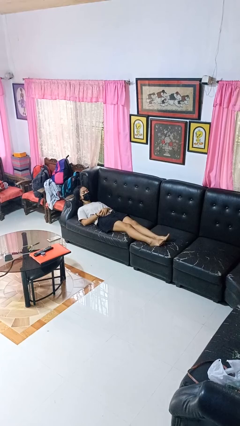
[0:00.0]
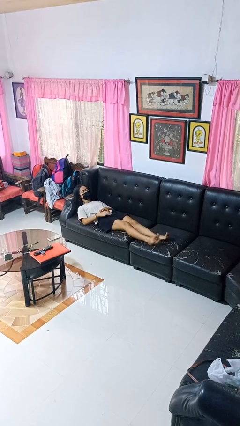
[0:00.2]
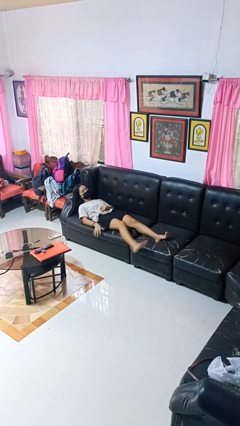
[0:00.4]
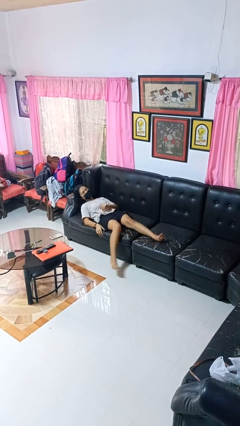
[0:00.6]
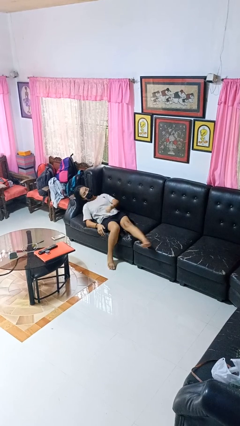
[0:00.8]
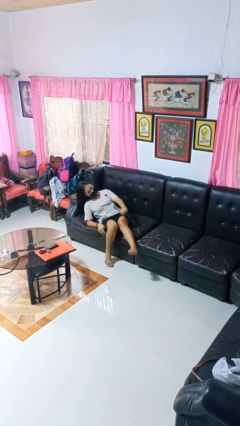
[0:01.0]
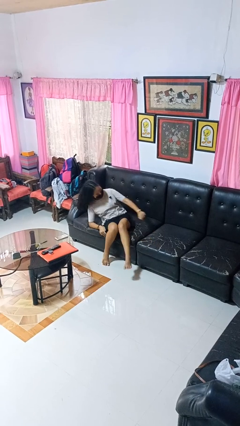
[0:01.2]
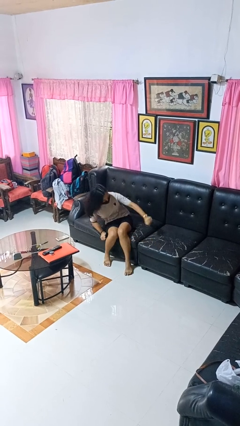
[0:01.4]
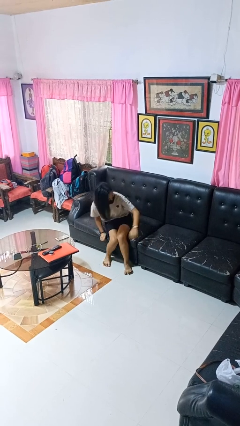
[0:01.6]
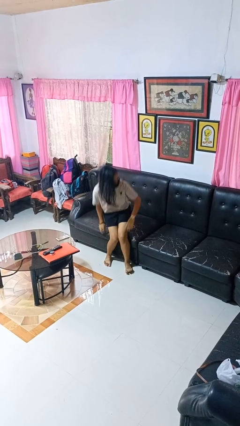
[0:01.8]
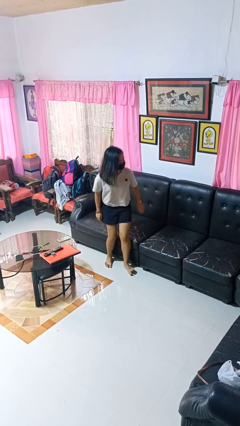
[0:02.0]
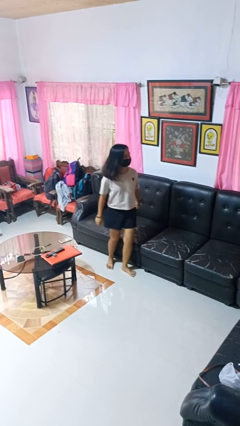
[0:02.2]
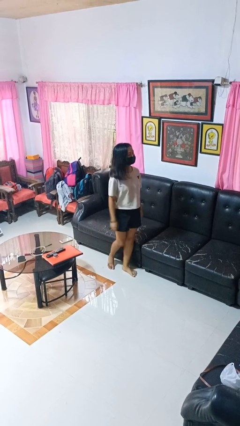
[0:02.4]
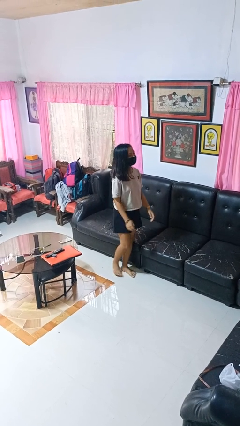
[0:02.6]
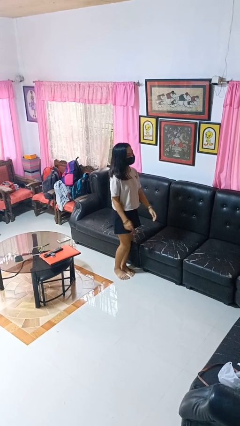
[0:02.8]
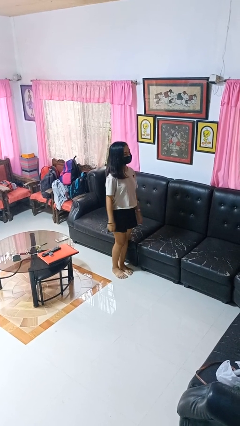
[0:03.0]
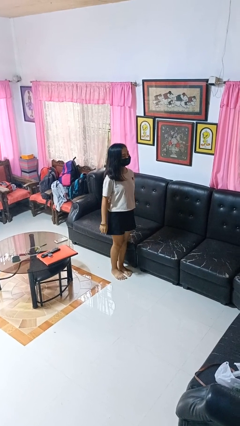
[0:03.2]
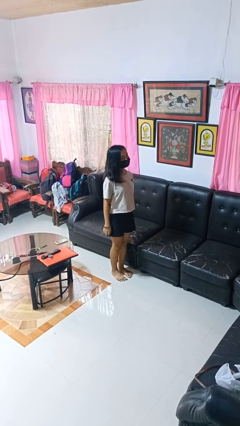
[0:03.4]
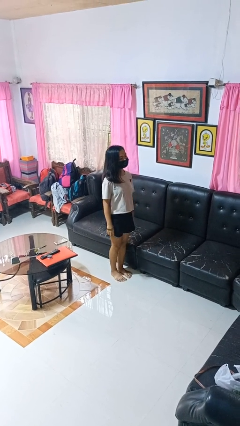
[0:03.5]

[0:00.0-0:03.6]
person stands up

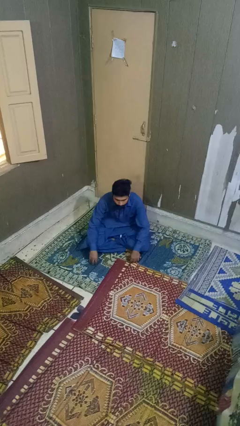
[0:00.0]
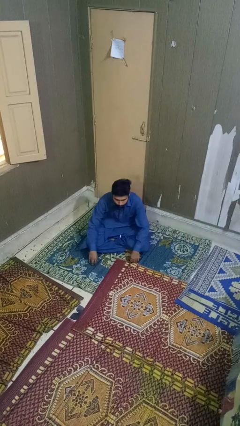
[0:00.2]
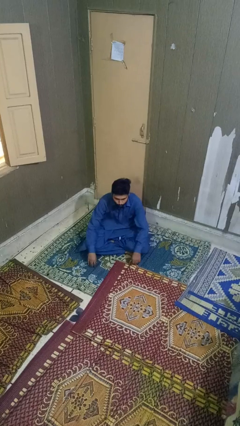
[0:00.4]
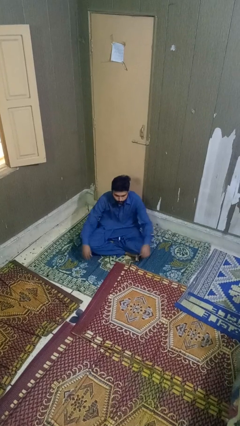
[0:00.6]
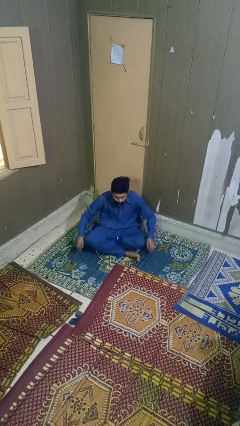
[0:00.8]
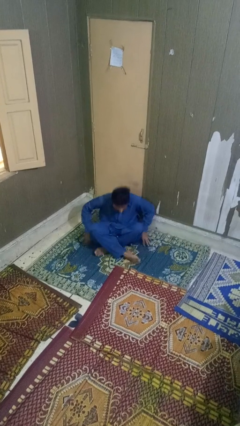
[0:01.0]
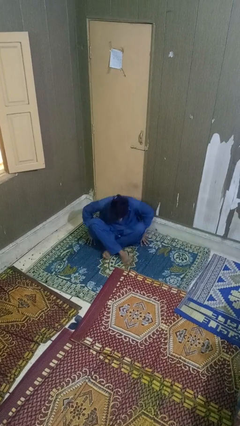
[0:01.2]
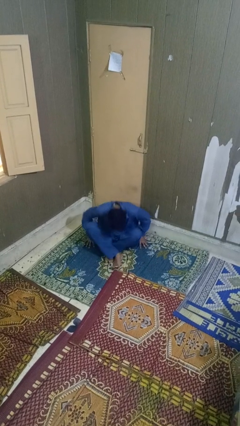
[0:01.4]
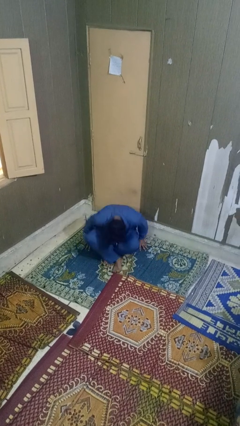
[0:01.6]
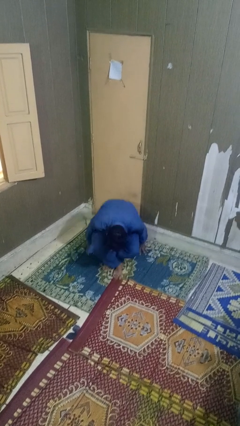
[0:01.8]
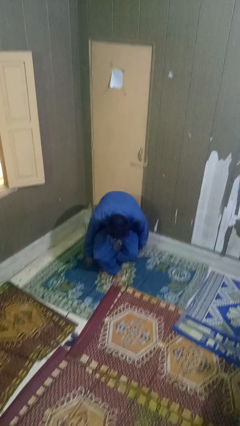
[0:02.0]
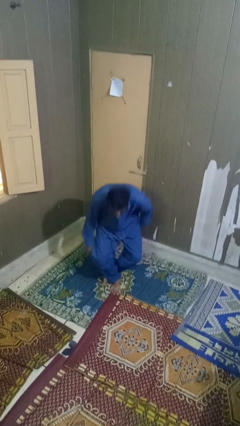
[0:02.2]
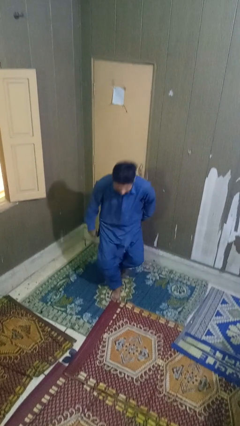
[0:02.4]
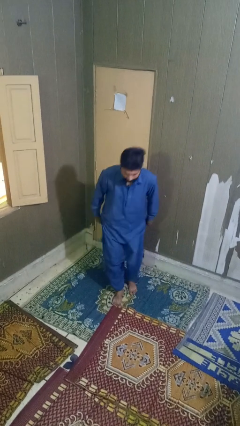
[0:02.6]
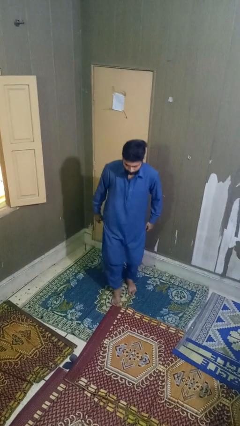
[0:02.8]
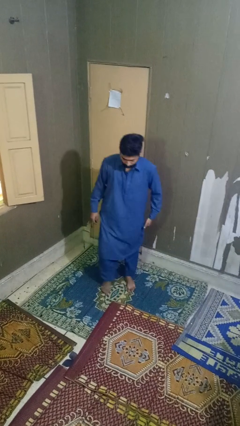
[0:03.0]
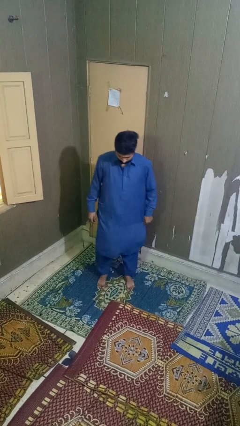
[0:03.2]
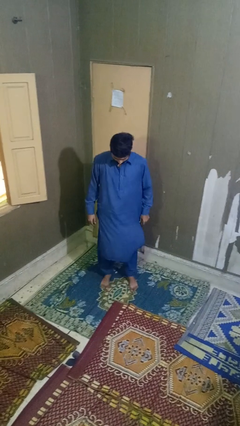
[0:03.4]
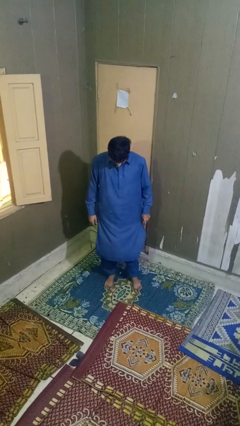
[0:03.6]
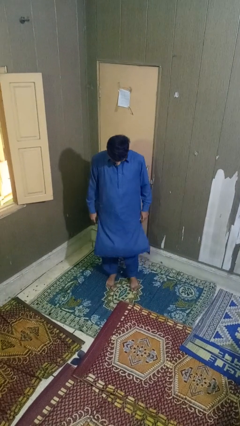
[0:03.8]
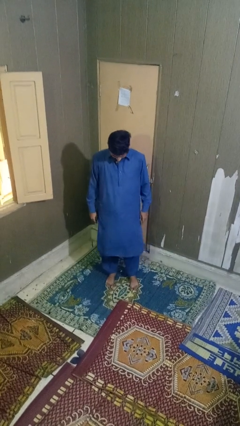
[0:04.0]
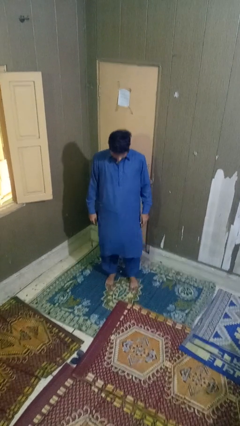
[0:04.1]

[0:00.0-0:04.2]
person stands up from floor

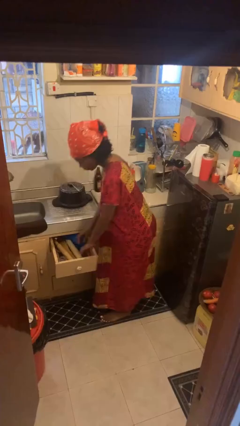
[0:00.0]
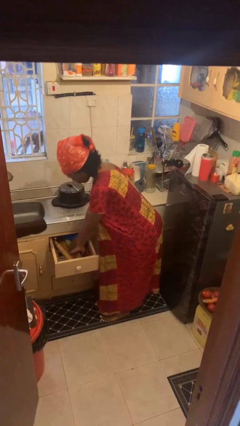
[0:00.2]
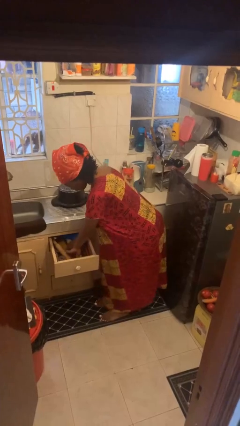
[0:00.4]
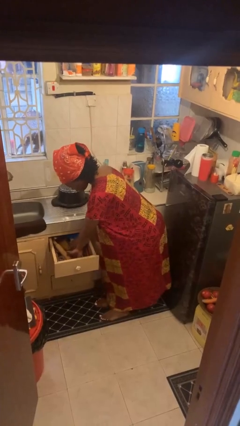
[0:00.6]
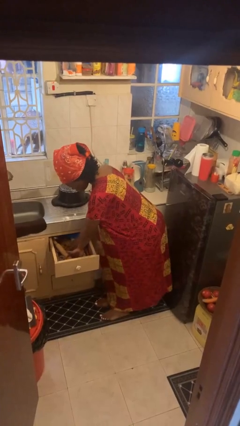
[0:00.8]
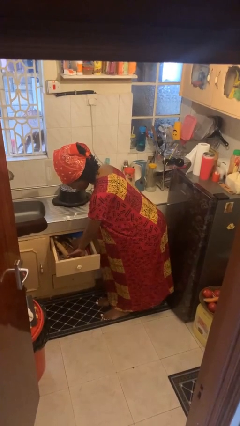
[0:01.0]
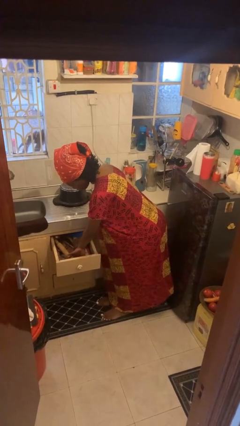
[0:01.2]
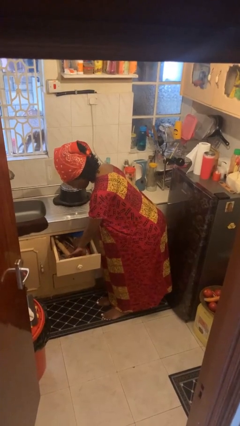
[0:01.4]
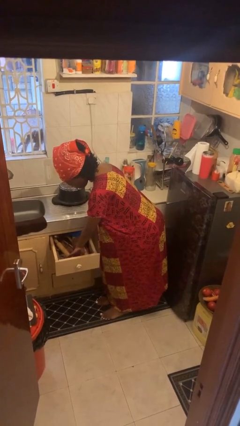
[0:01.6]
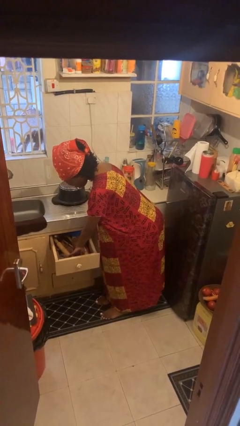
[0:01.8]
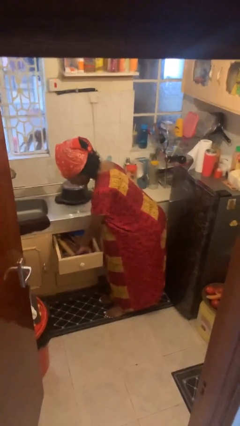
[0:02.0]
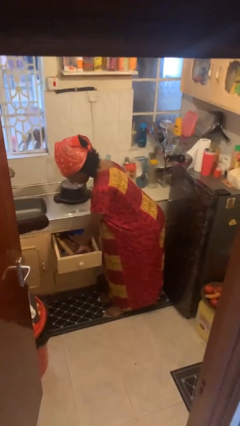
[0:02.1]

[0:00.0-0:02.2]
person searches in kitchen drawer

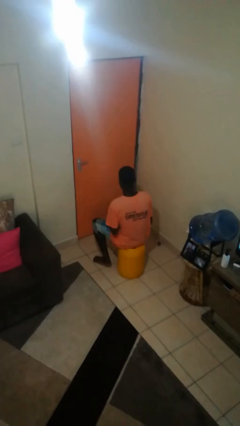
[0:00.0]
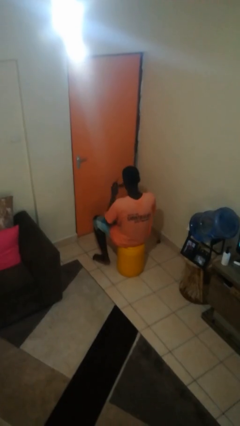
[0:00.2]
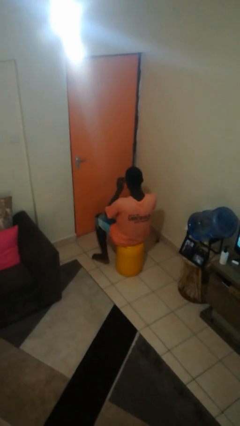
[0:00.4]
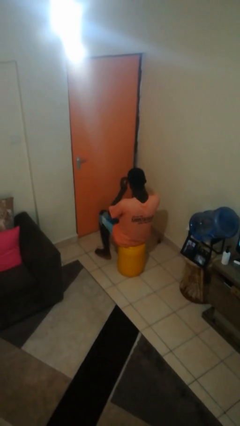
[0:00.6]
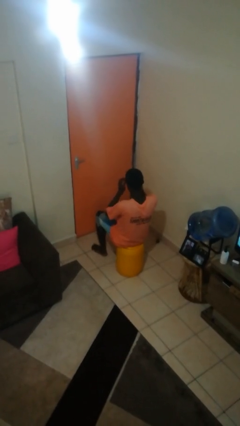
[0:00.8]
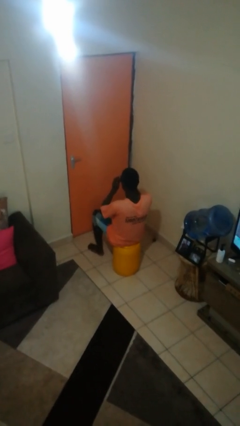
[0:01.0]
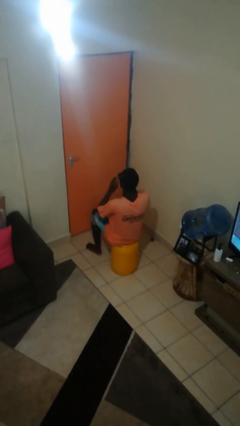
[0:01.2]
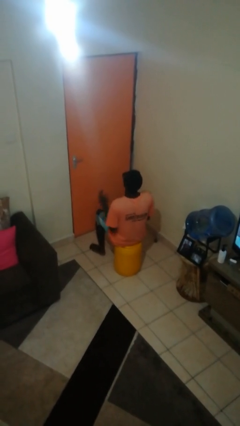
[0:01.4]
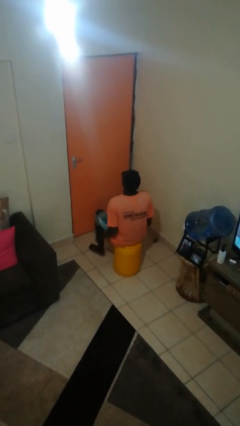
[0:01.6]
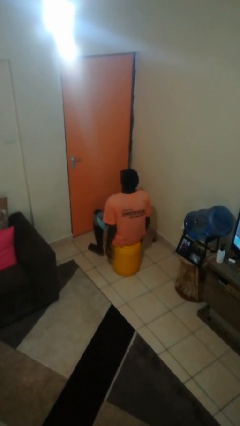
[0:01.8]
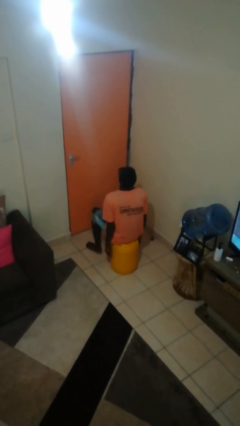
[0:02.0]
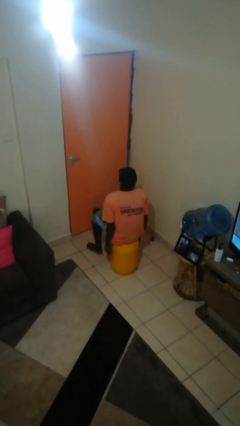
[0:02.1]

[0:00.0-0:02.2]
person puts on sunglasses

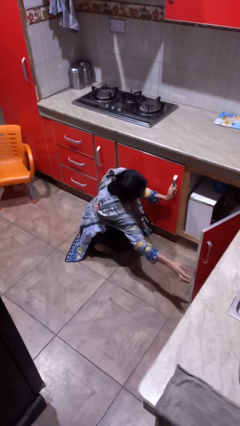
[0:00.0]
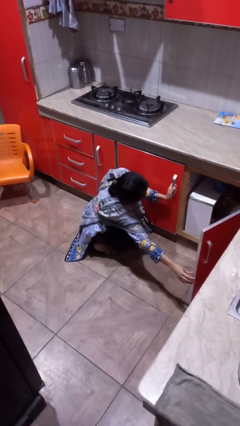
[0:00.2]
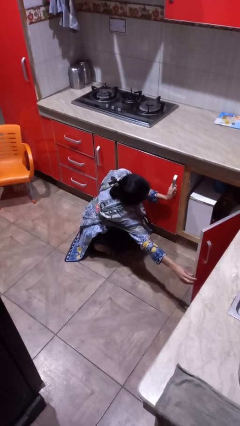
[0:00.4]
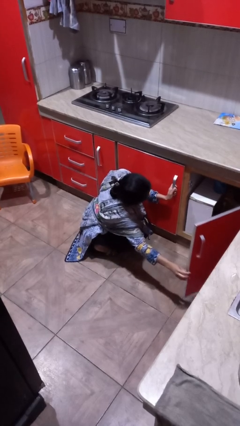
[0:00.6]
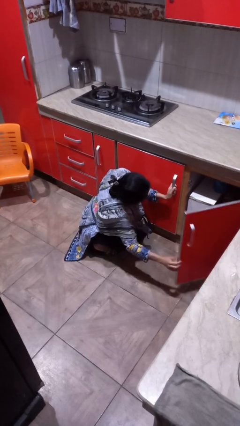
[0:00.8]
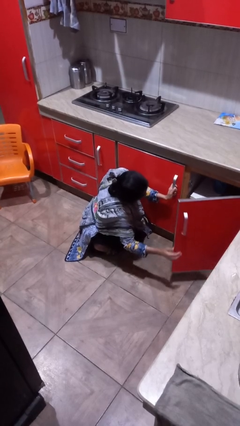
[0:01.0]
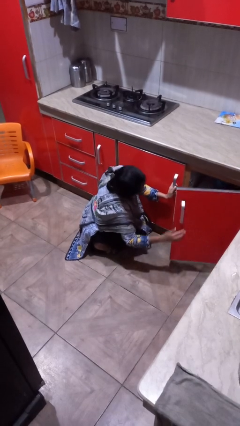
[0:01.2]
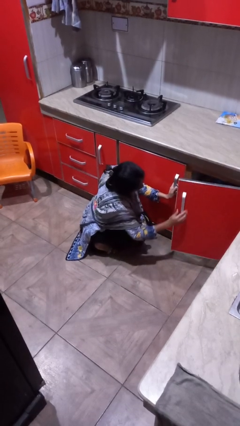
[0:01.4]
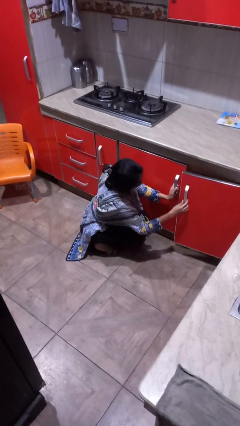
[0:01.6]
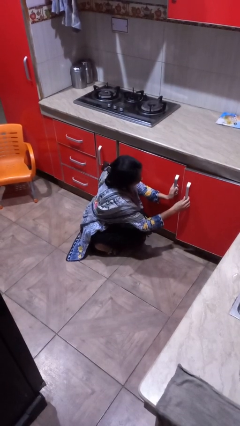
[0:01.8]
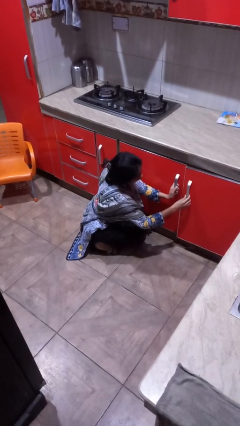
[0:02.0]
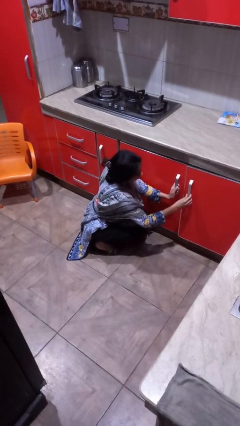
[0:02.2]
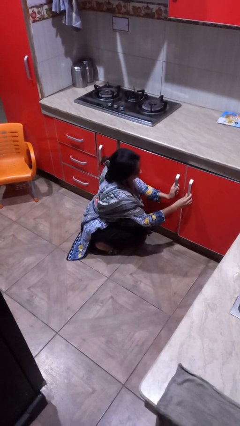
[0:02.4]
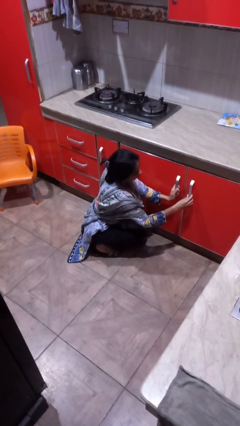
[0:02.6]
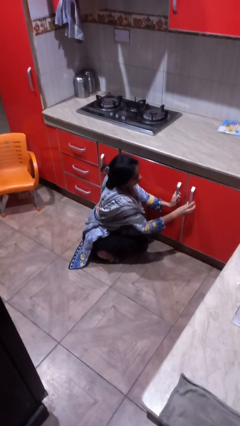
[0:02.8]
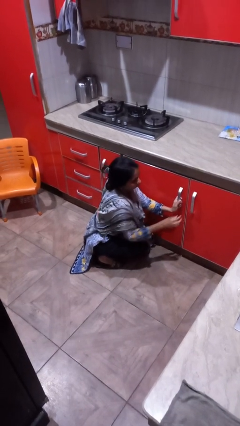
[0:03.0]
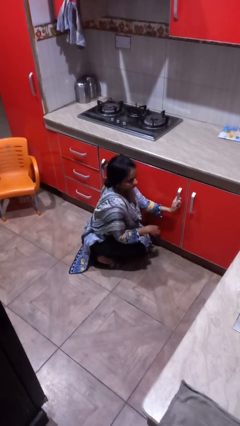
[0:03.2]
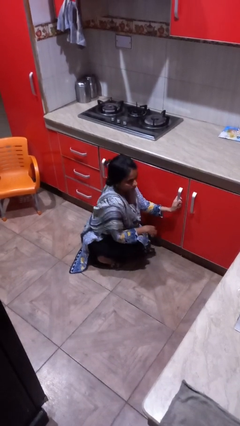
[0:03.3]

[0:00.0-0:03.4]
person closes cabinet

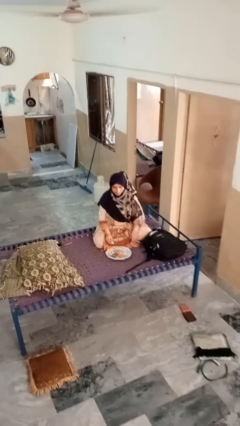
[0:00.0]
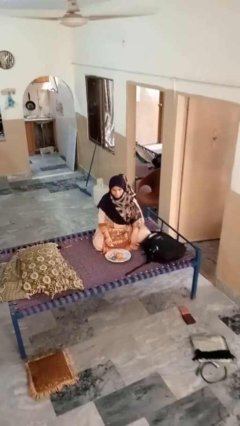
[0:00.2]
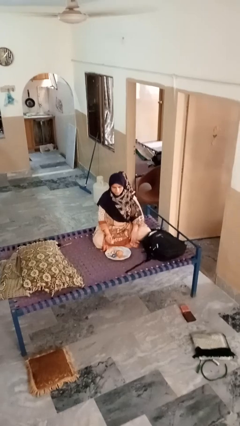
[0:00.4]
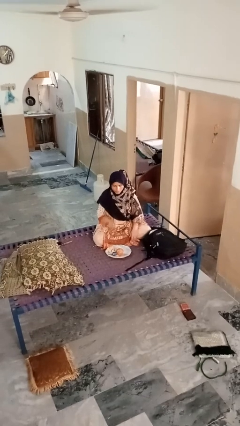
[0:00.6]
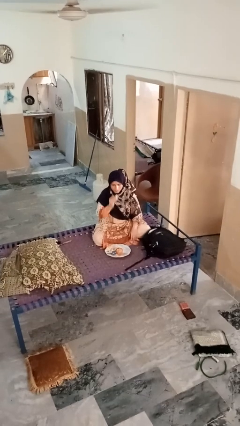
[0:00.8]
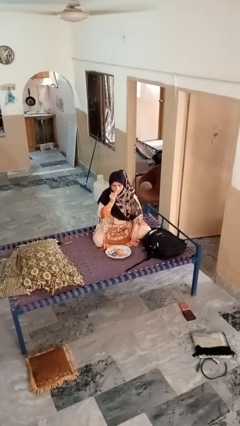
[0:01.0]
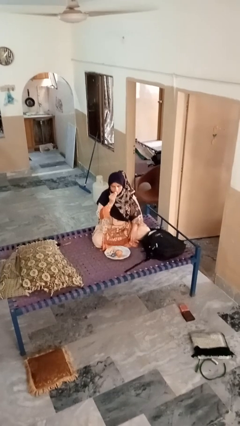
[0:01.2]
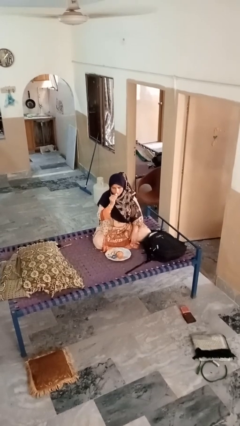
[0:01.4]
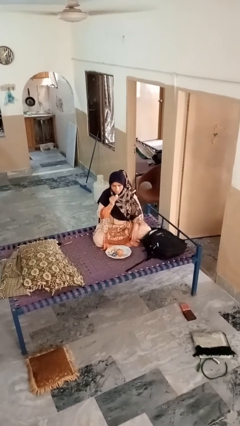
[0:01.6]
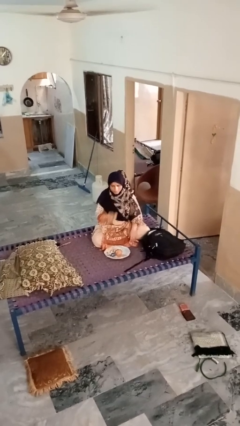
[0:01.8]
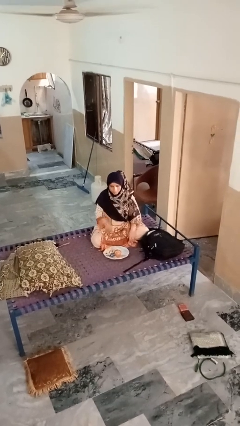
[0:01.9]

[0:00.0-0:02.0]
person eats apple
